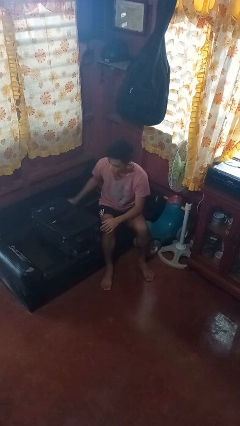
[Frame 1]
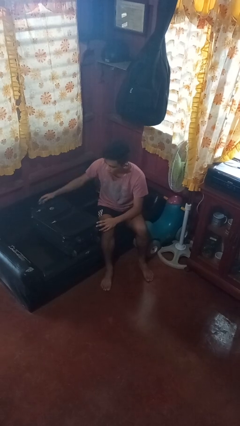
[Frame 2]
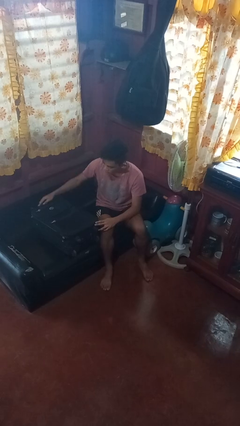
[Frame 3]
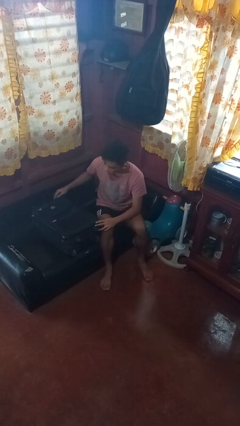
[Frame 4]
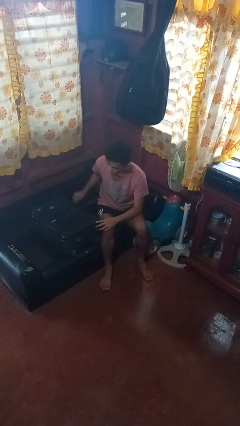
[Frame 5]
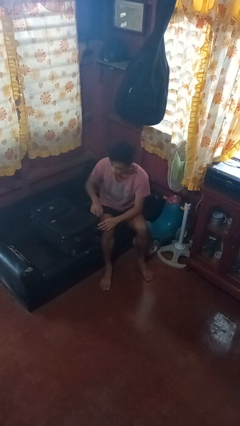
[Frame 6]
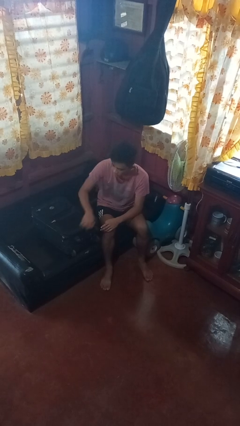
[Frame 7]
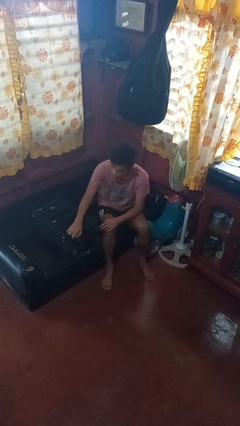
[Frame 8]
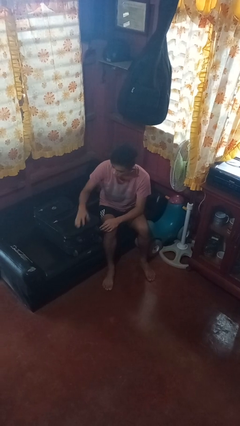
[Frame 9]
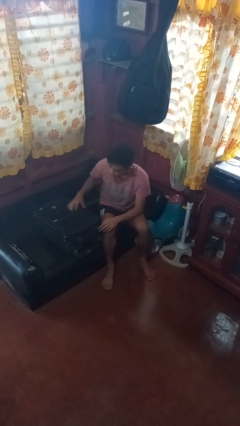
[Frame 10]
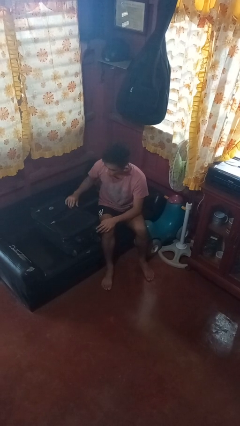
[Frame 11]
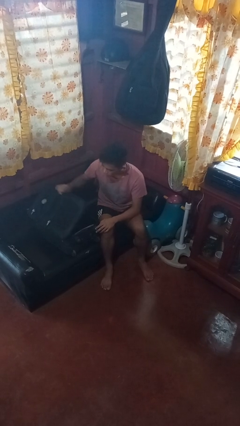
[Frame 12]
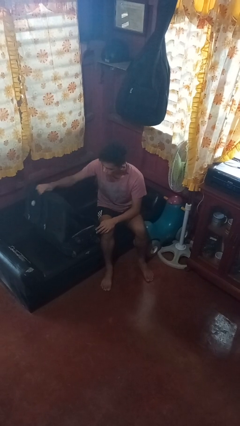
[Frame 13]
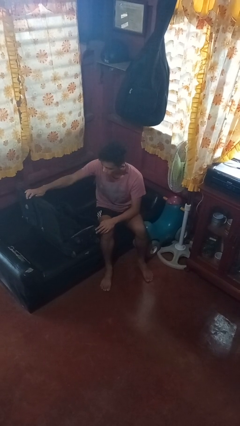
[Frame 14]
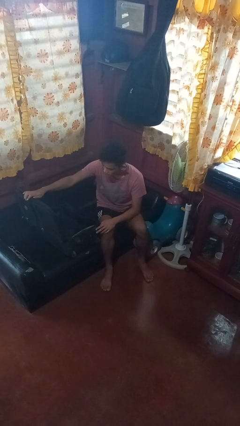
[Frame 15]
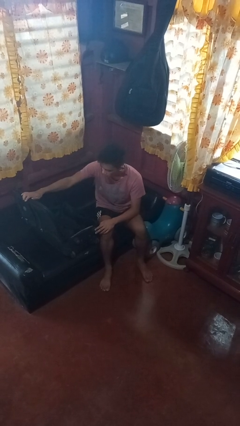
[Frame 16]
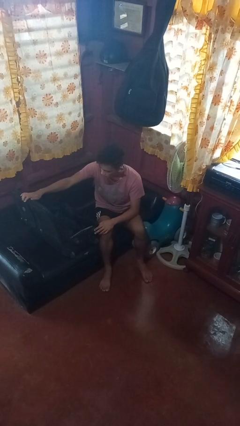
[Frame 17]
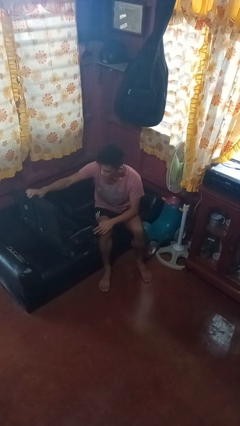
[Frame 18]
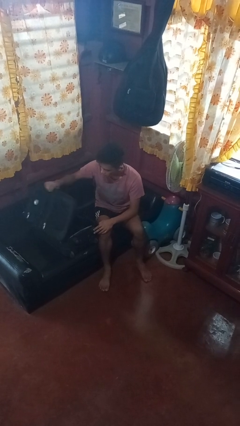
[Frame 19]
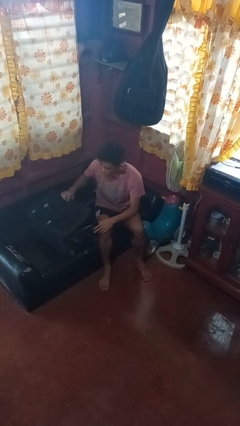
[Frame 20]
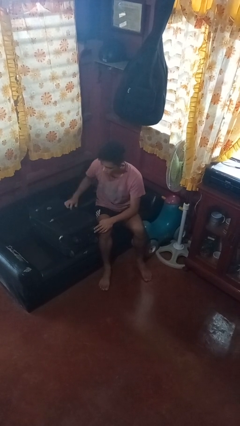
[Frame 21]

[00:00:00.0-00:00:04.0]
person opens suitcase

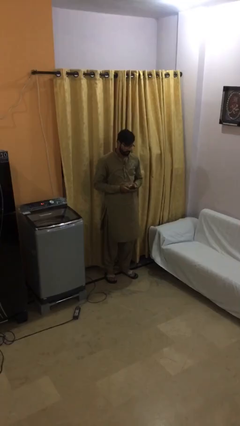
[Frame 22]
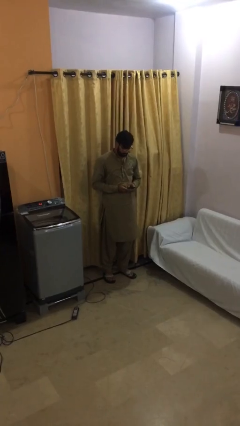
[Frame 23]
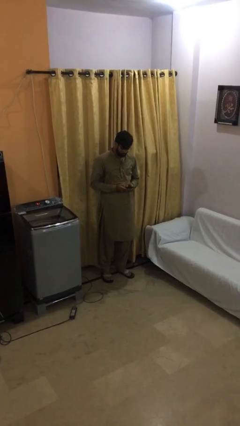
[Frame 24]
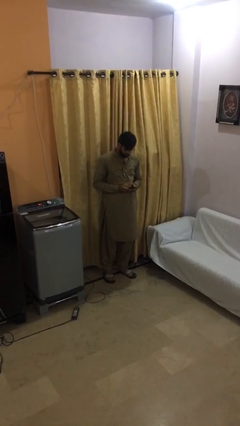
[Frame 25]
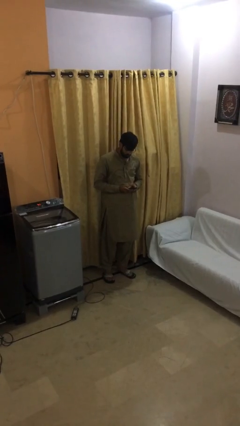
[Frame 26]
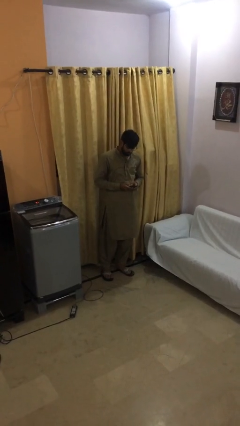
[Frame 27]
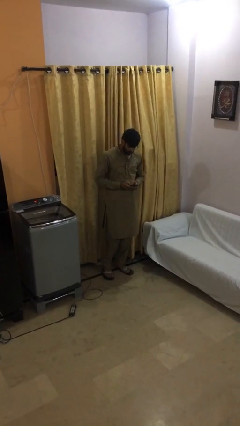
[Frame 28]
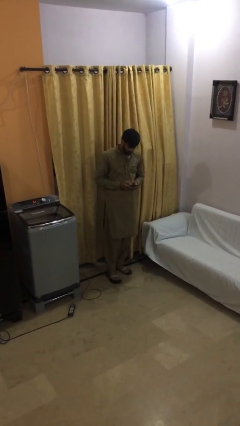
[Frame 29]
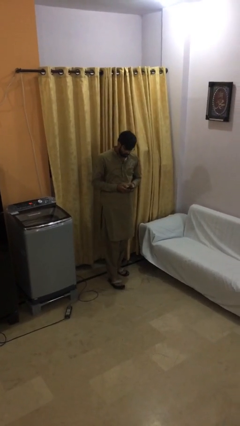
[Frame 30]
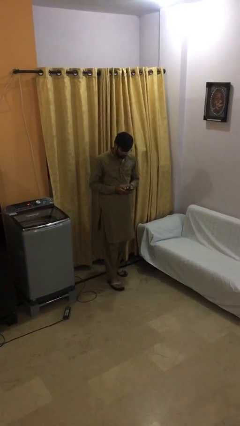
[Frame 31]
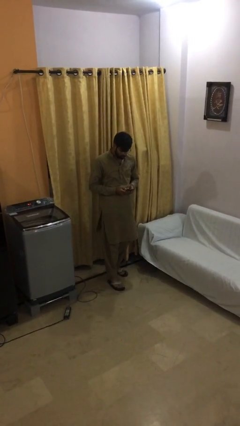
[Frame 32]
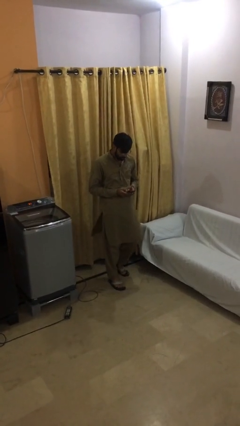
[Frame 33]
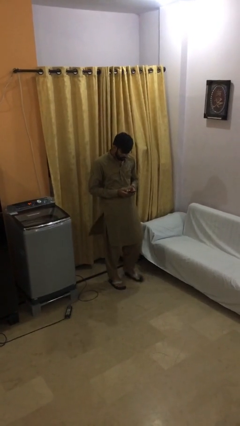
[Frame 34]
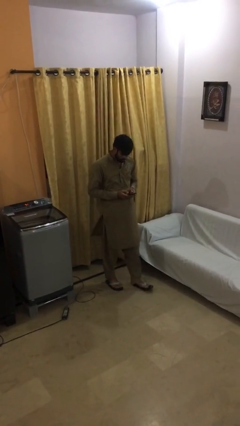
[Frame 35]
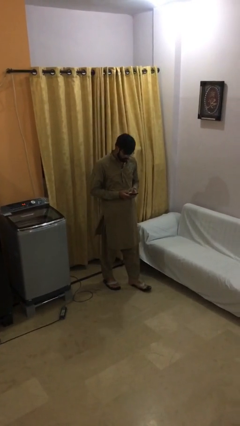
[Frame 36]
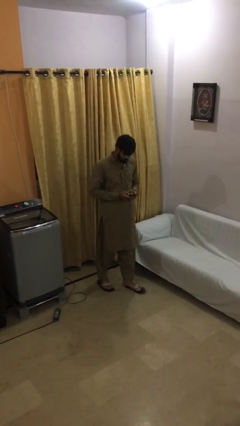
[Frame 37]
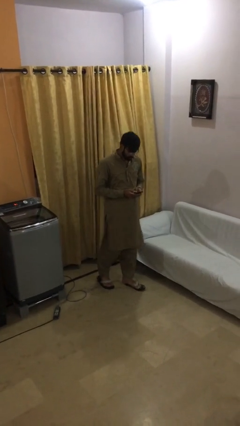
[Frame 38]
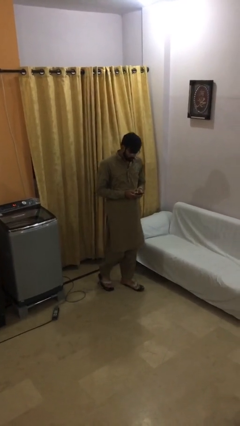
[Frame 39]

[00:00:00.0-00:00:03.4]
person texts on phone

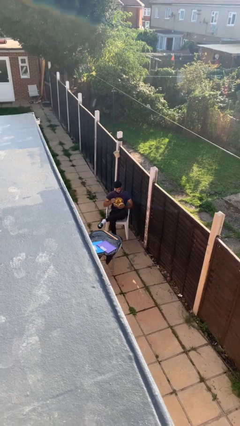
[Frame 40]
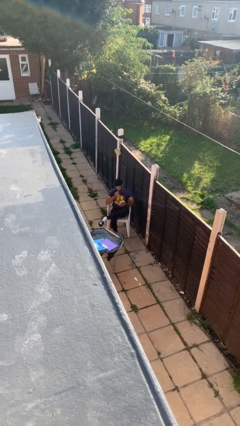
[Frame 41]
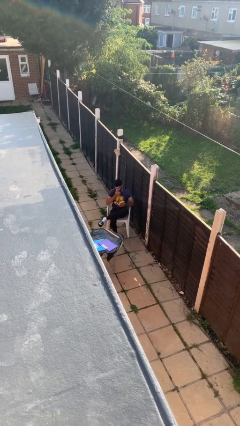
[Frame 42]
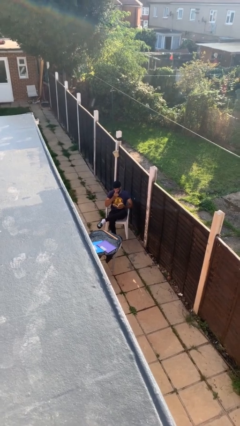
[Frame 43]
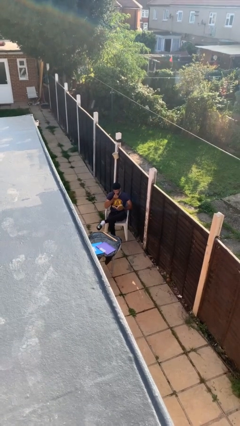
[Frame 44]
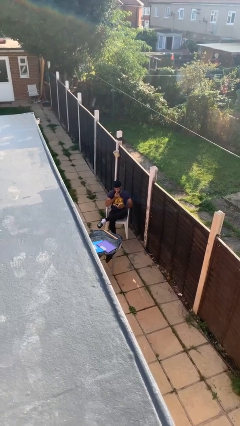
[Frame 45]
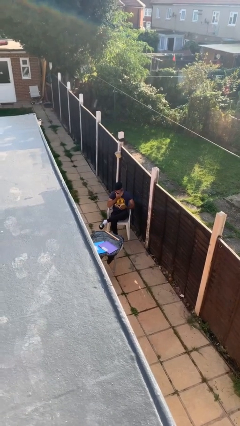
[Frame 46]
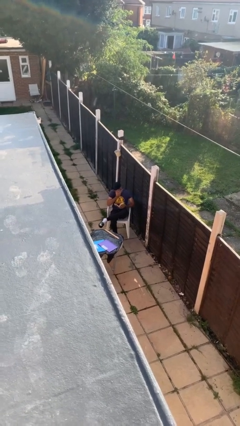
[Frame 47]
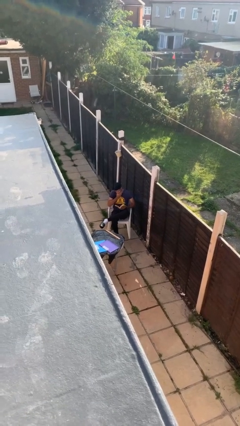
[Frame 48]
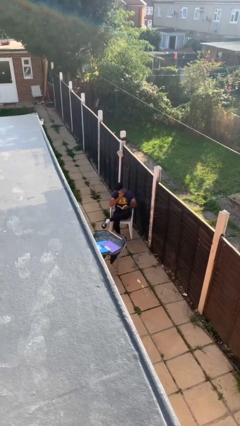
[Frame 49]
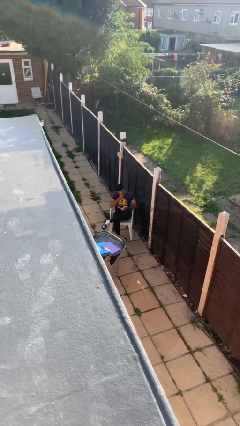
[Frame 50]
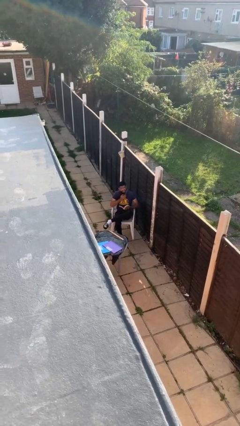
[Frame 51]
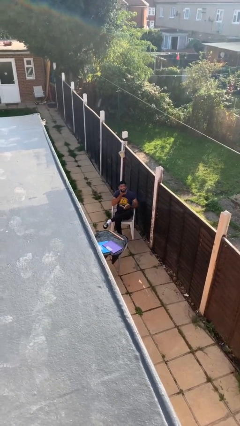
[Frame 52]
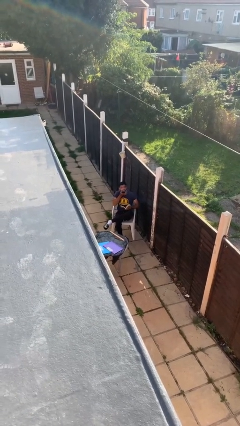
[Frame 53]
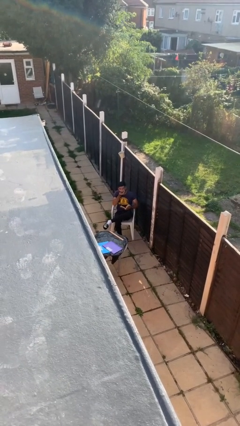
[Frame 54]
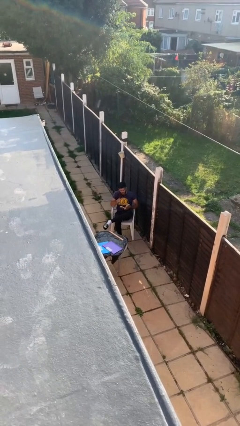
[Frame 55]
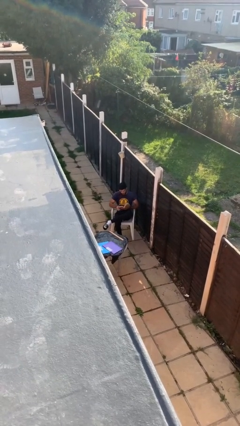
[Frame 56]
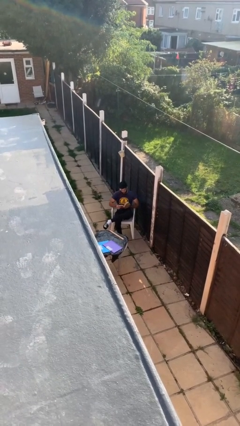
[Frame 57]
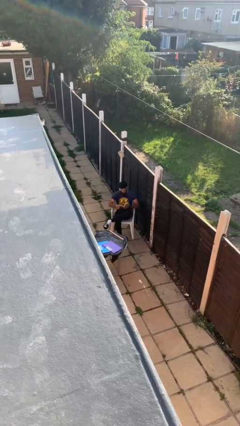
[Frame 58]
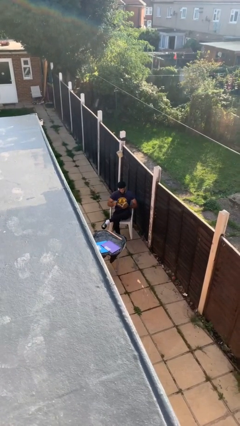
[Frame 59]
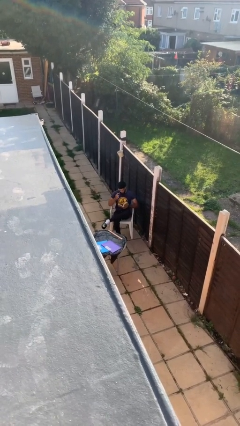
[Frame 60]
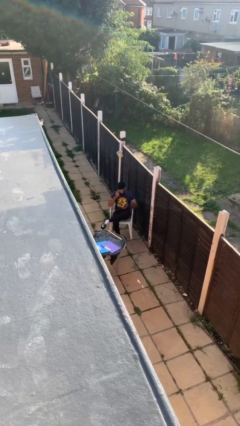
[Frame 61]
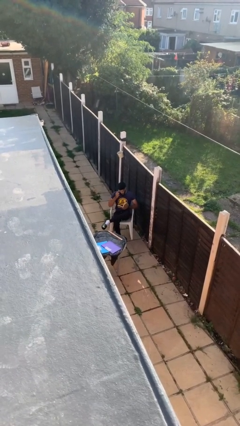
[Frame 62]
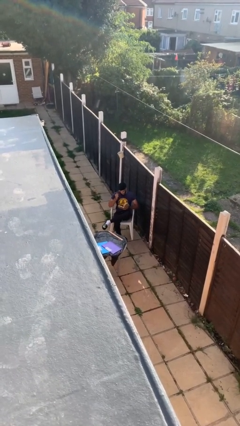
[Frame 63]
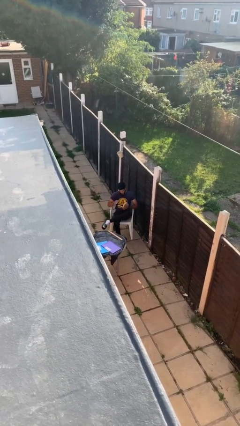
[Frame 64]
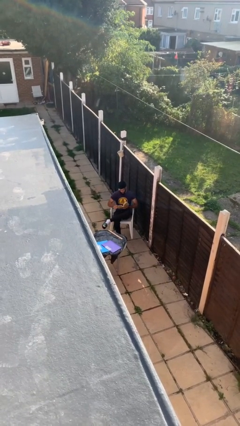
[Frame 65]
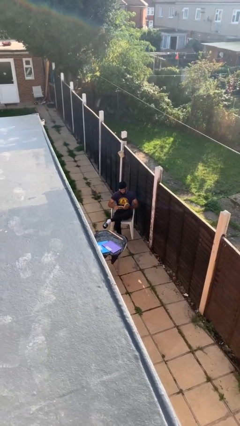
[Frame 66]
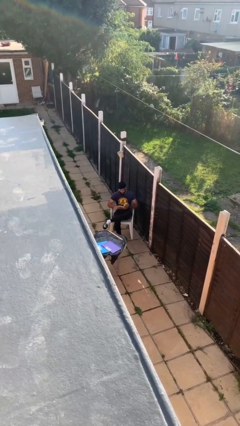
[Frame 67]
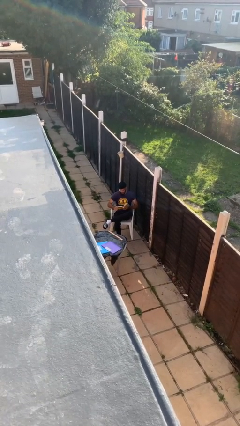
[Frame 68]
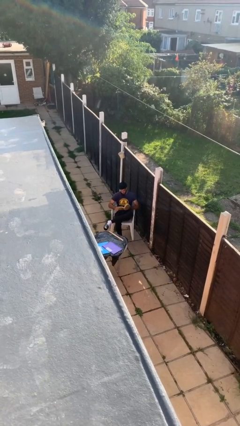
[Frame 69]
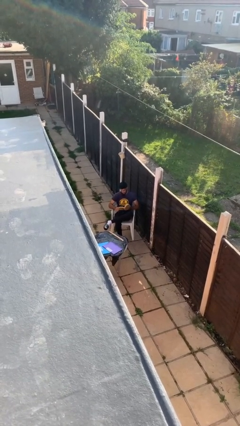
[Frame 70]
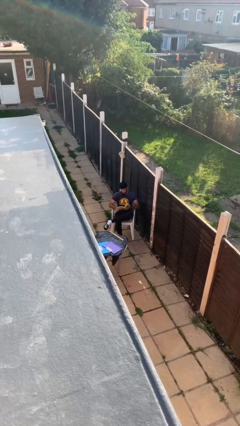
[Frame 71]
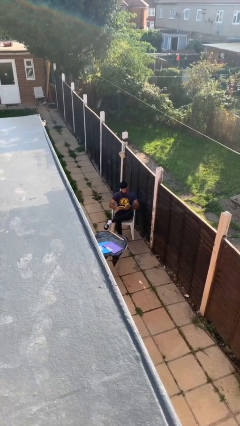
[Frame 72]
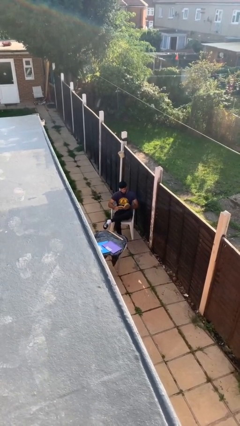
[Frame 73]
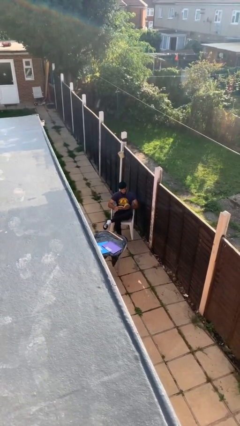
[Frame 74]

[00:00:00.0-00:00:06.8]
person reads document

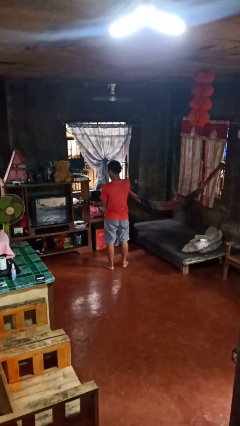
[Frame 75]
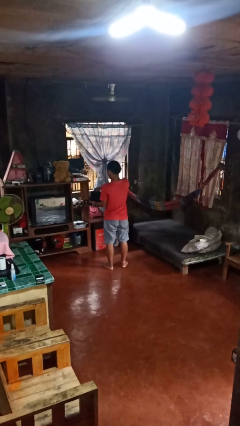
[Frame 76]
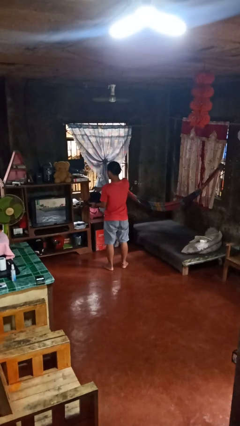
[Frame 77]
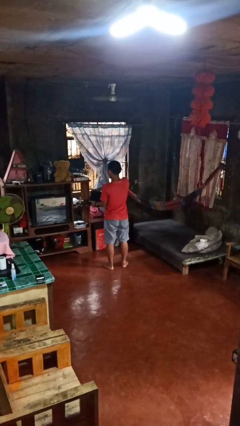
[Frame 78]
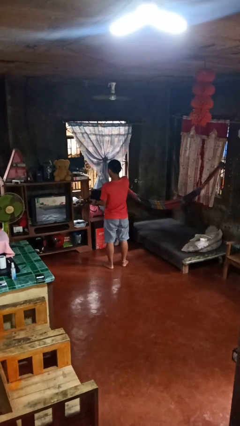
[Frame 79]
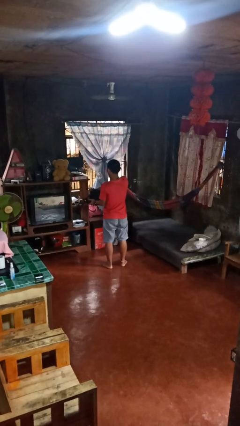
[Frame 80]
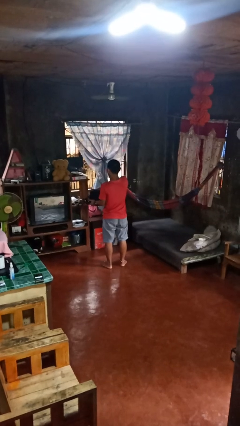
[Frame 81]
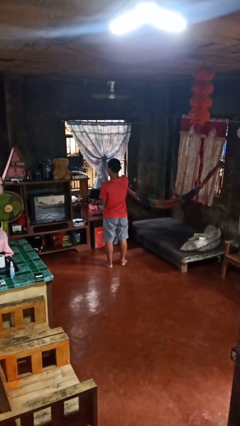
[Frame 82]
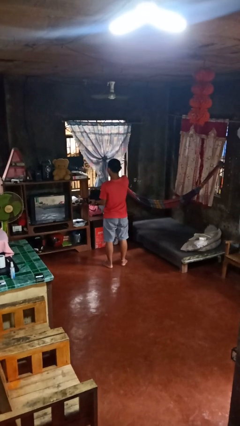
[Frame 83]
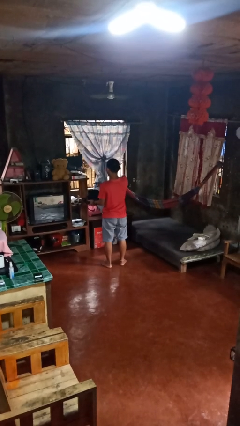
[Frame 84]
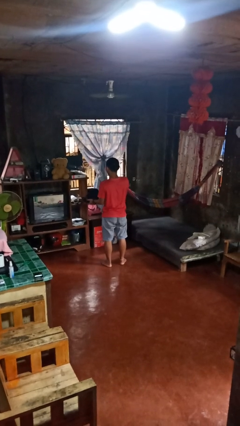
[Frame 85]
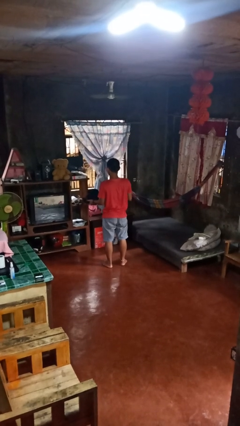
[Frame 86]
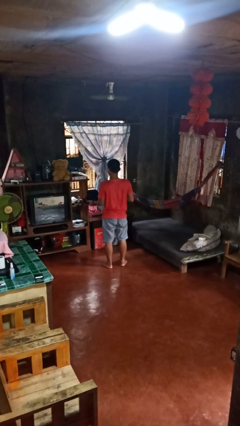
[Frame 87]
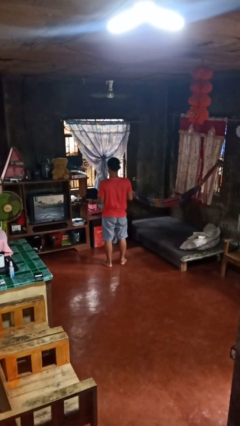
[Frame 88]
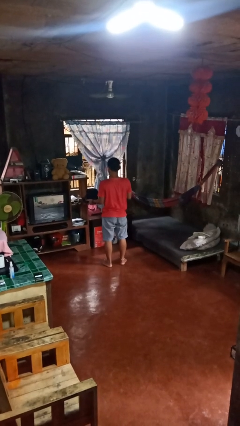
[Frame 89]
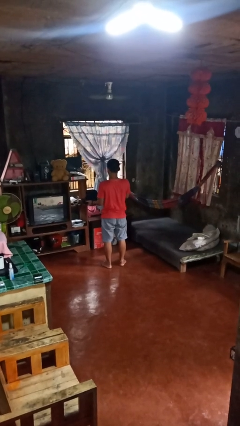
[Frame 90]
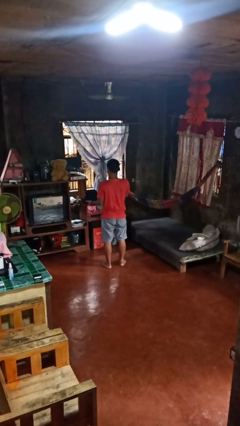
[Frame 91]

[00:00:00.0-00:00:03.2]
person eats snack from bag
